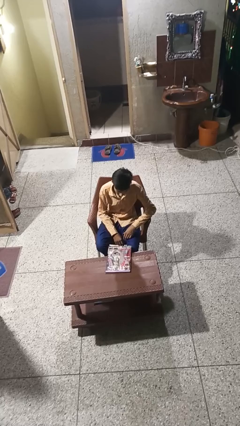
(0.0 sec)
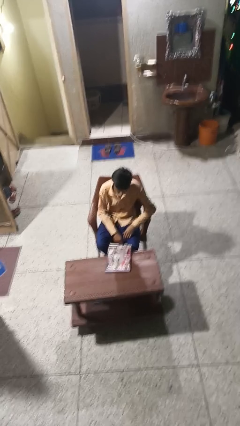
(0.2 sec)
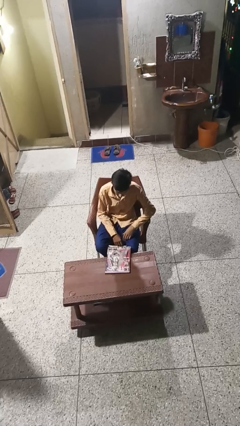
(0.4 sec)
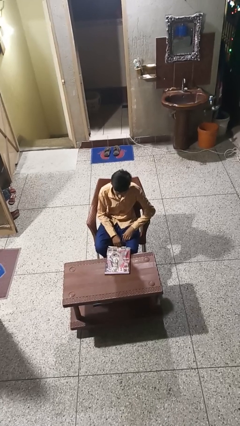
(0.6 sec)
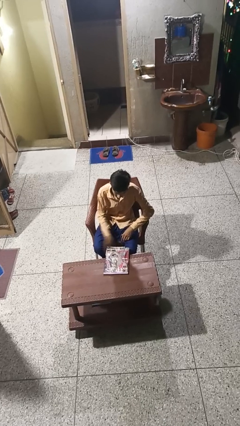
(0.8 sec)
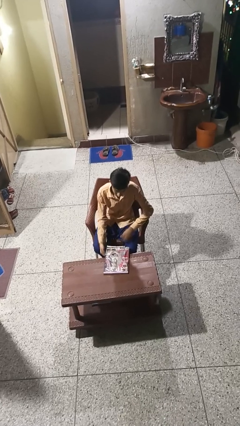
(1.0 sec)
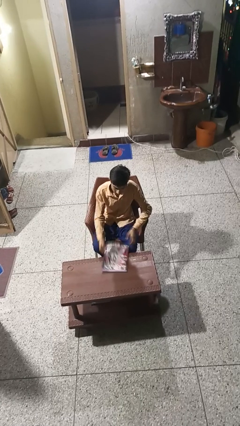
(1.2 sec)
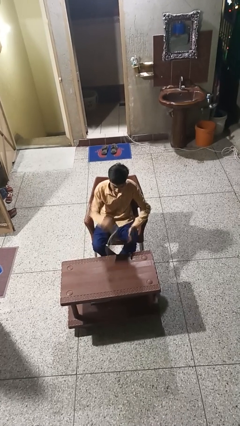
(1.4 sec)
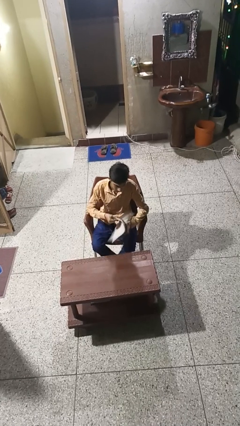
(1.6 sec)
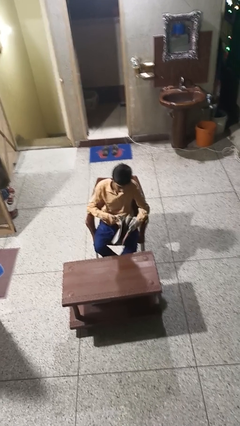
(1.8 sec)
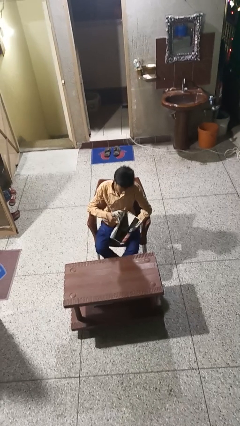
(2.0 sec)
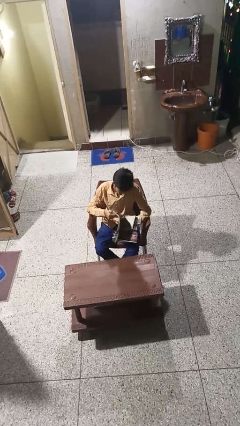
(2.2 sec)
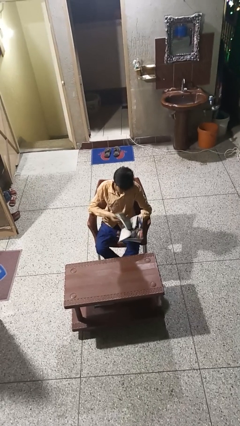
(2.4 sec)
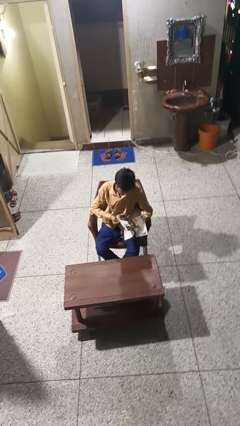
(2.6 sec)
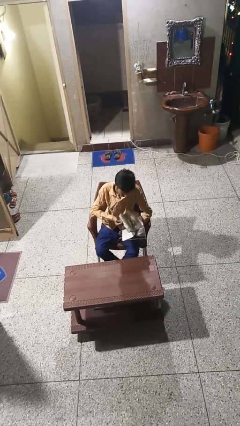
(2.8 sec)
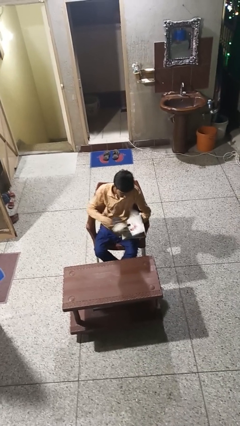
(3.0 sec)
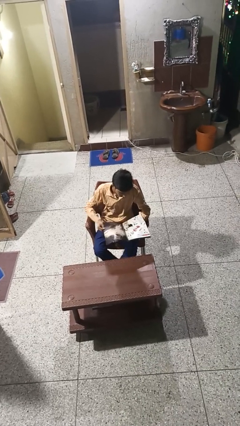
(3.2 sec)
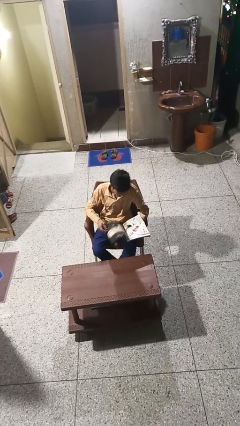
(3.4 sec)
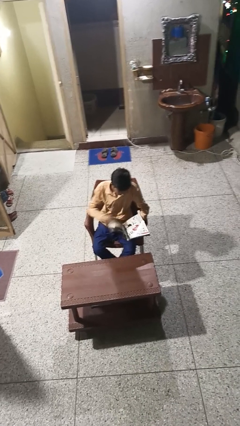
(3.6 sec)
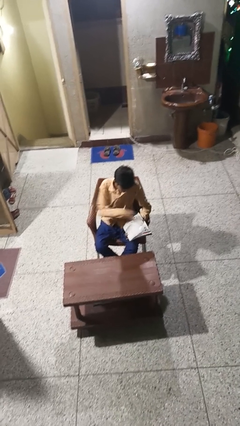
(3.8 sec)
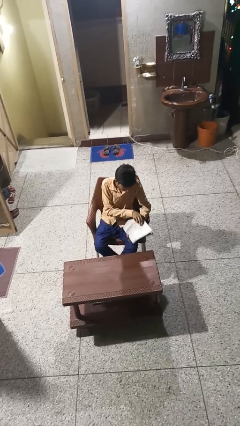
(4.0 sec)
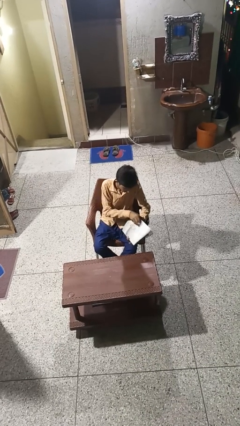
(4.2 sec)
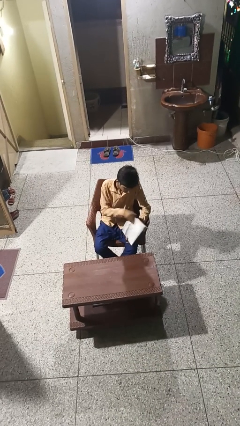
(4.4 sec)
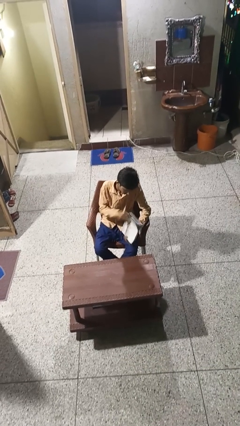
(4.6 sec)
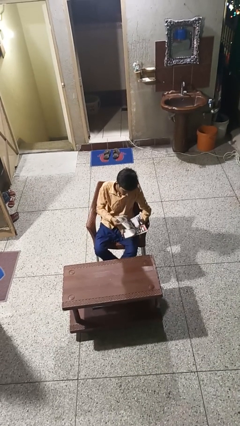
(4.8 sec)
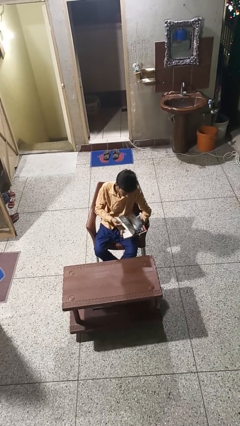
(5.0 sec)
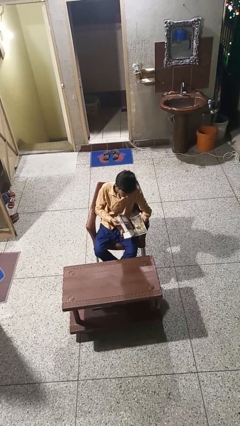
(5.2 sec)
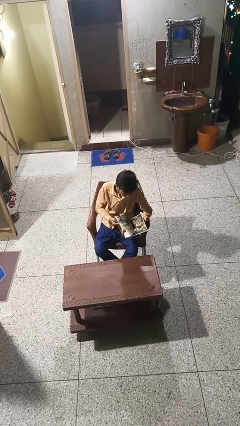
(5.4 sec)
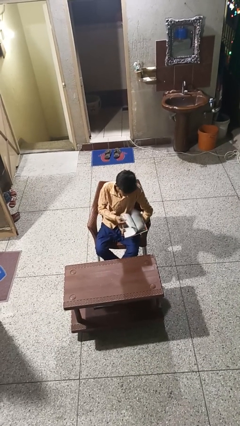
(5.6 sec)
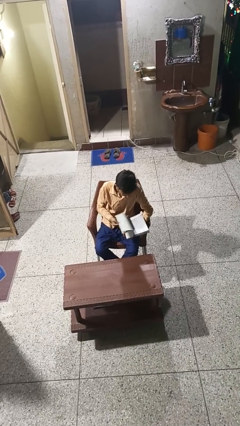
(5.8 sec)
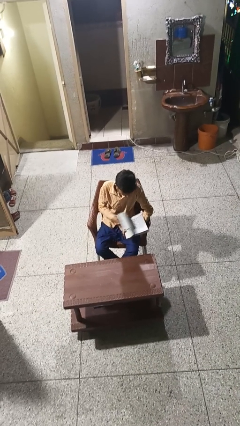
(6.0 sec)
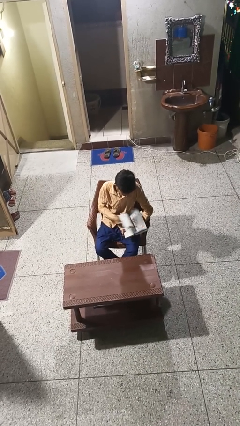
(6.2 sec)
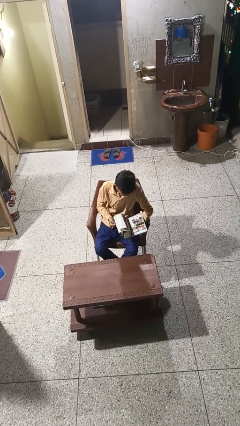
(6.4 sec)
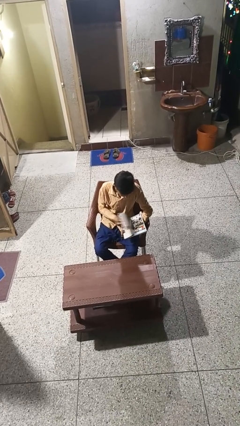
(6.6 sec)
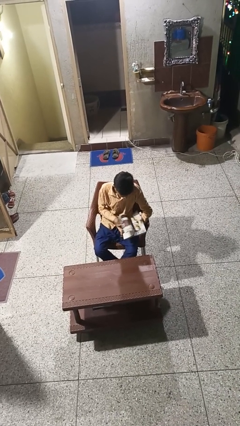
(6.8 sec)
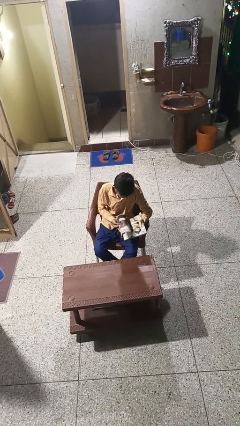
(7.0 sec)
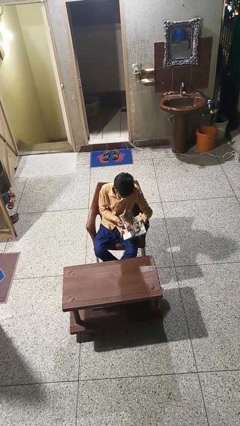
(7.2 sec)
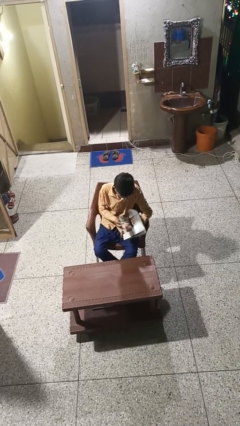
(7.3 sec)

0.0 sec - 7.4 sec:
person reads magazine

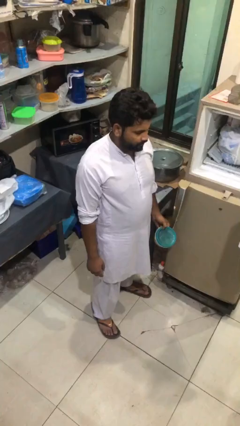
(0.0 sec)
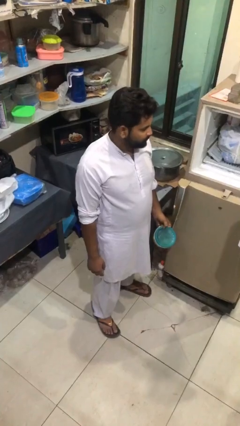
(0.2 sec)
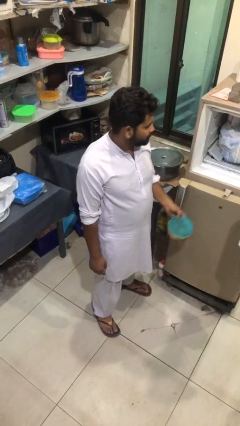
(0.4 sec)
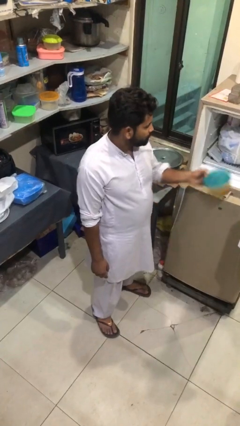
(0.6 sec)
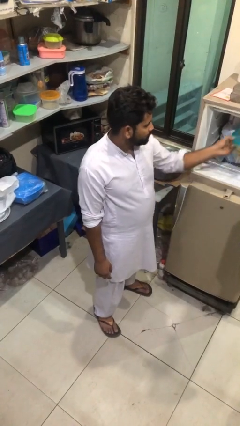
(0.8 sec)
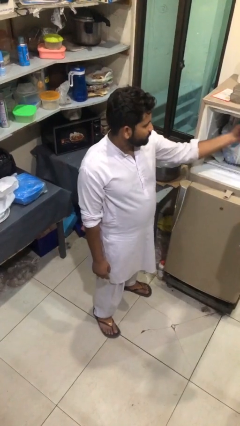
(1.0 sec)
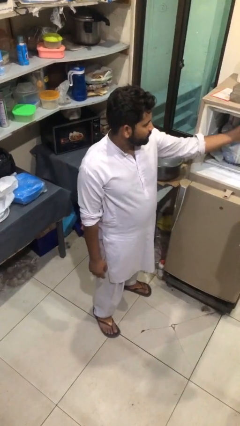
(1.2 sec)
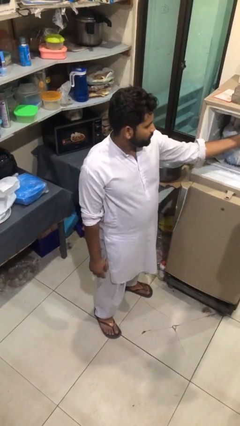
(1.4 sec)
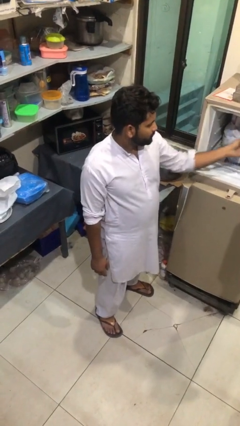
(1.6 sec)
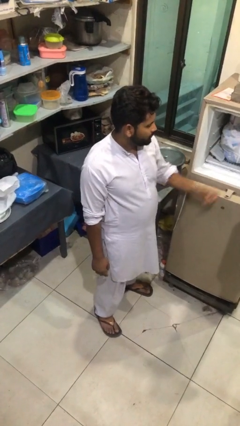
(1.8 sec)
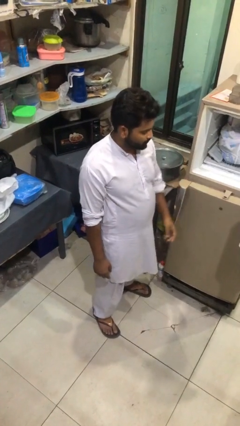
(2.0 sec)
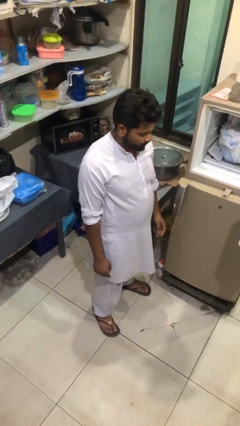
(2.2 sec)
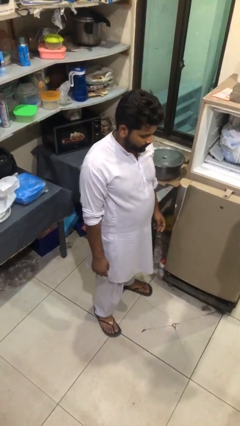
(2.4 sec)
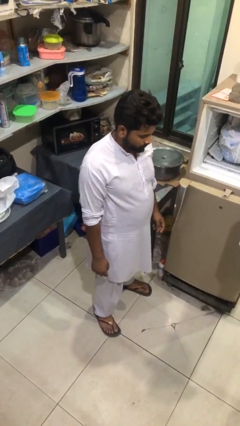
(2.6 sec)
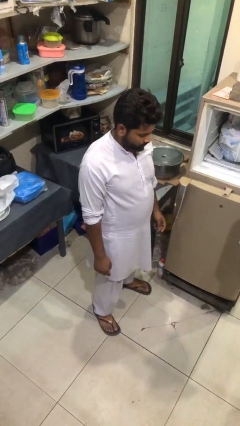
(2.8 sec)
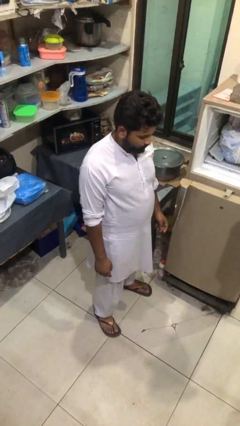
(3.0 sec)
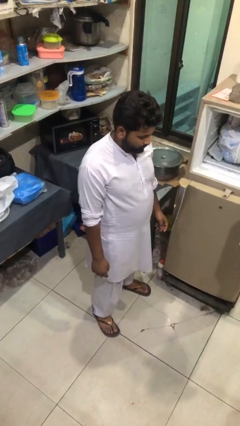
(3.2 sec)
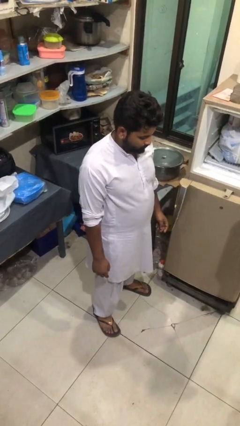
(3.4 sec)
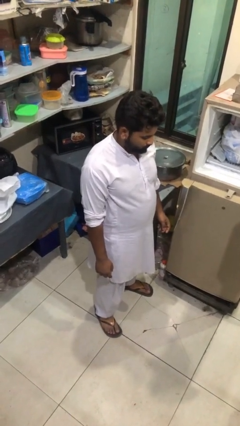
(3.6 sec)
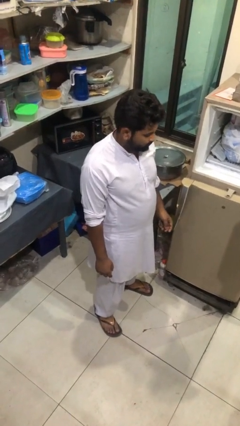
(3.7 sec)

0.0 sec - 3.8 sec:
person puts object into refrigerator

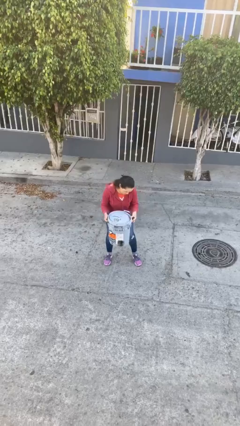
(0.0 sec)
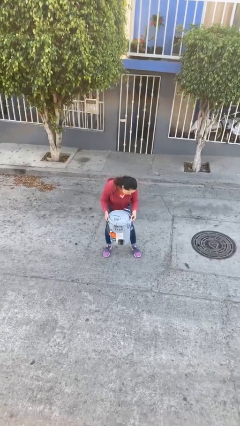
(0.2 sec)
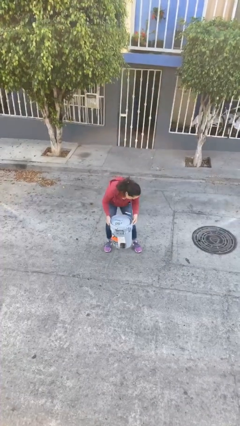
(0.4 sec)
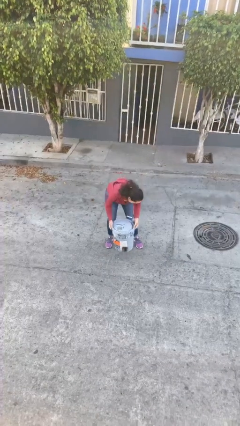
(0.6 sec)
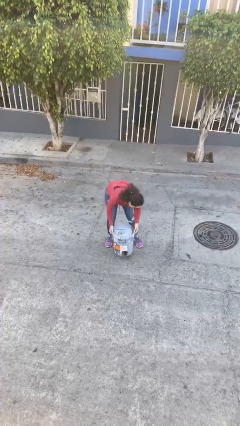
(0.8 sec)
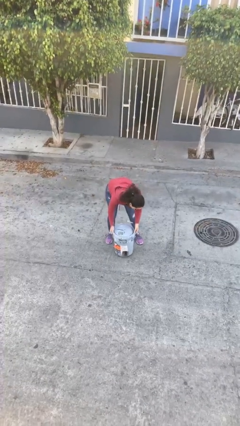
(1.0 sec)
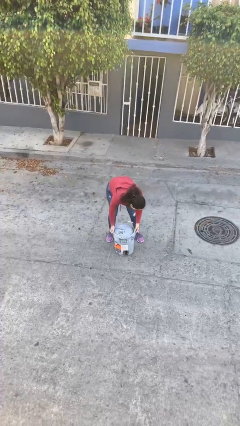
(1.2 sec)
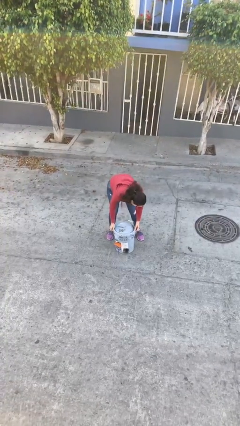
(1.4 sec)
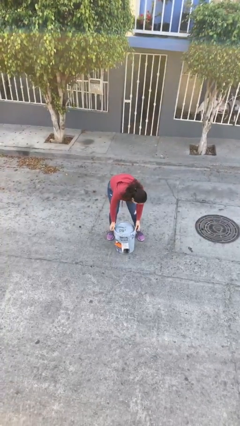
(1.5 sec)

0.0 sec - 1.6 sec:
person puts down object on floor

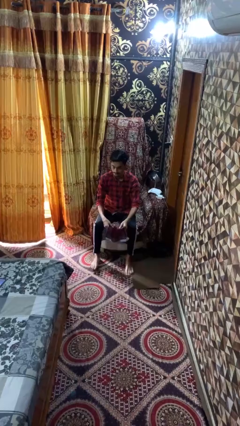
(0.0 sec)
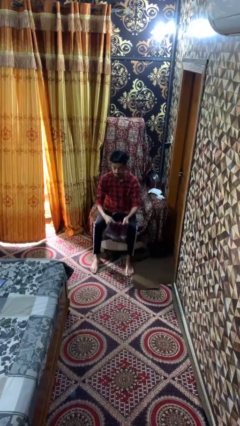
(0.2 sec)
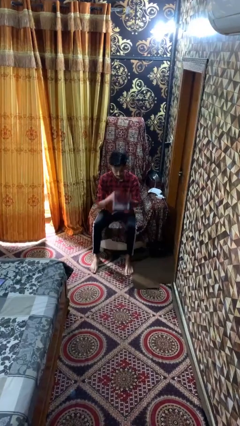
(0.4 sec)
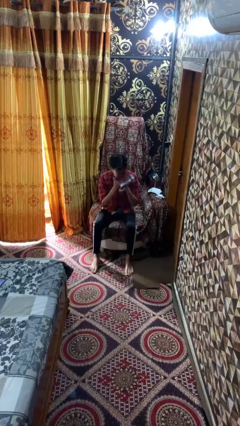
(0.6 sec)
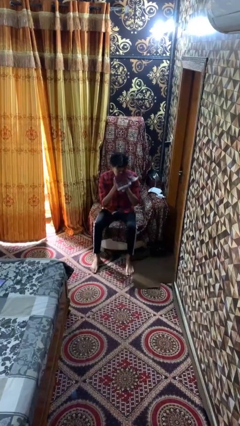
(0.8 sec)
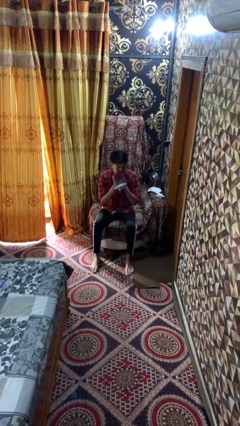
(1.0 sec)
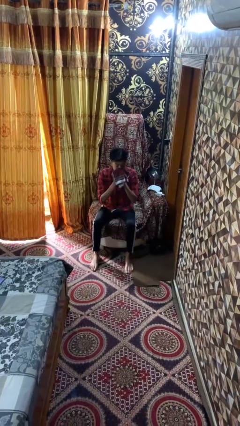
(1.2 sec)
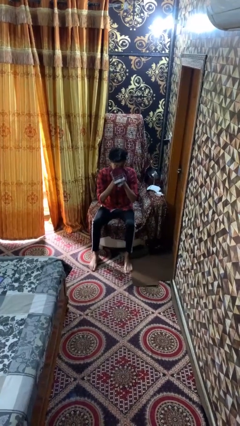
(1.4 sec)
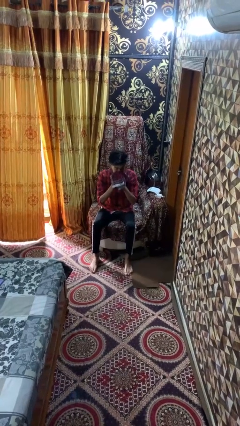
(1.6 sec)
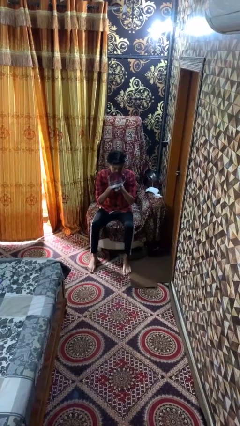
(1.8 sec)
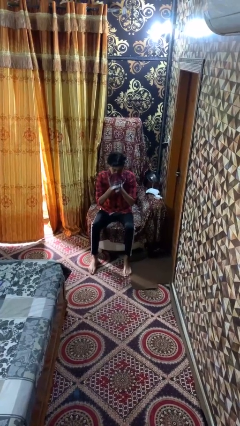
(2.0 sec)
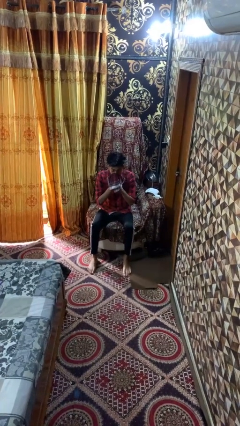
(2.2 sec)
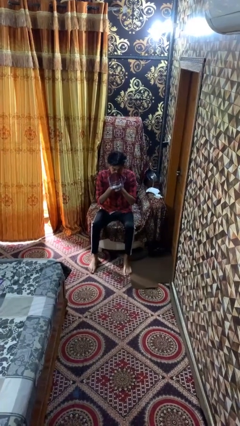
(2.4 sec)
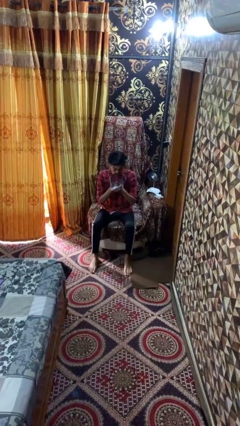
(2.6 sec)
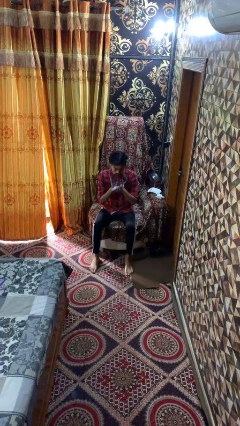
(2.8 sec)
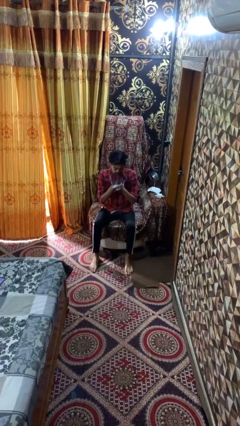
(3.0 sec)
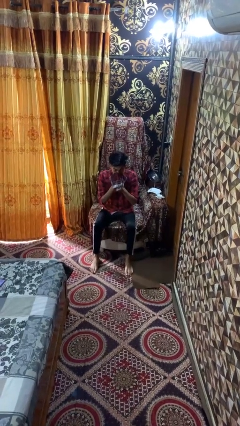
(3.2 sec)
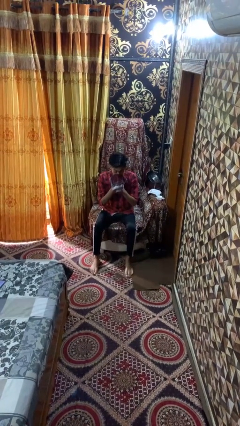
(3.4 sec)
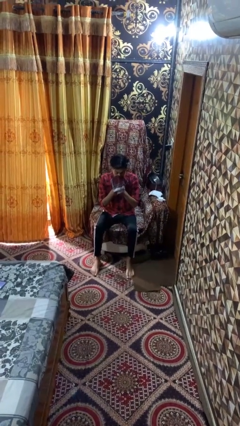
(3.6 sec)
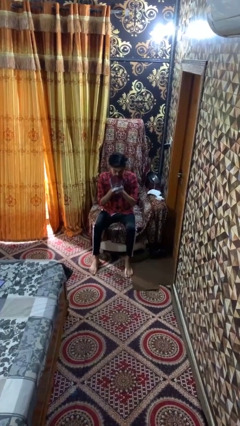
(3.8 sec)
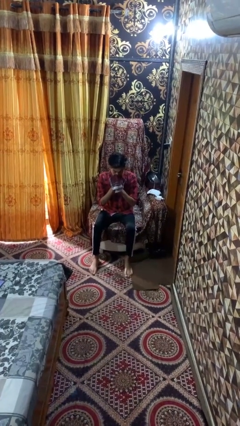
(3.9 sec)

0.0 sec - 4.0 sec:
person blows nose

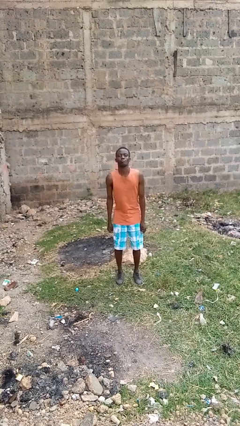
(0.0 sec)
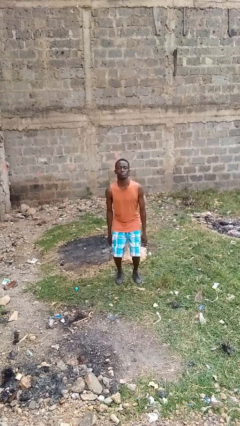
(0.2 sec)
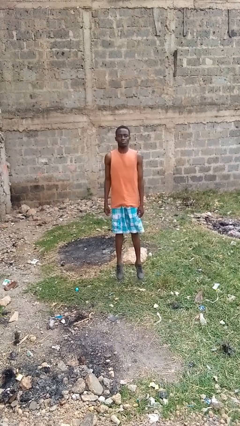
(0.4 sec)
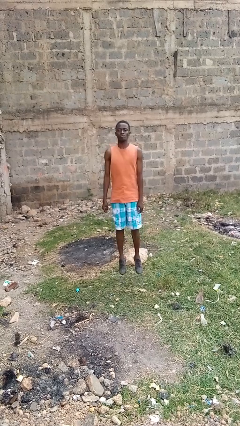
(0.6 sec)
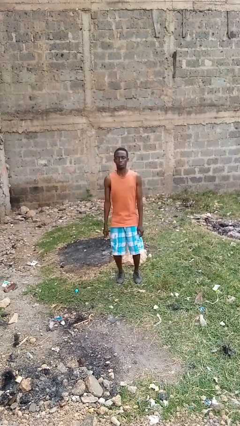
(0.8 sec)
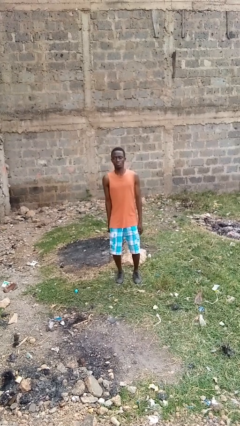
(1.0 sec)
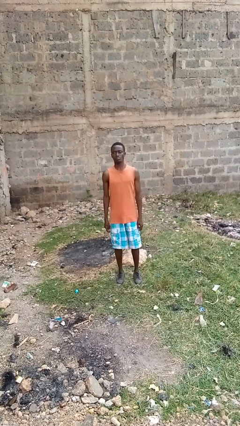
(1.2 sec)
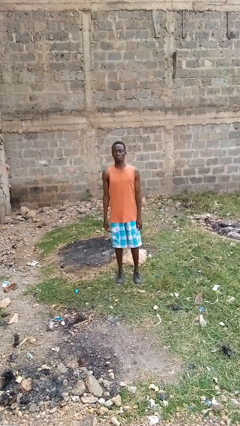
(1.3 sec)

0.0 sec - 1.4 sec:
person jumps
